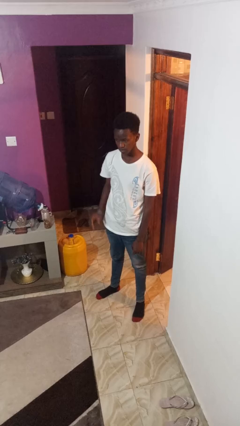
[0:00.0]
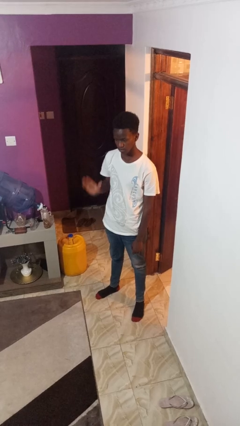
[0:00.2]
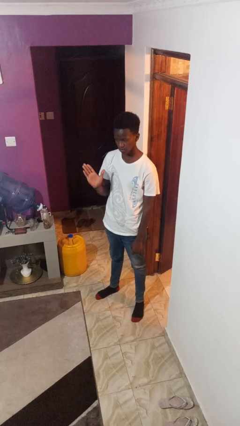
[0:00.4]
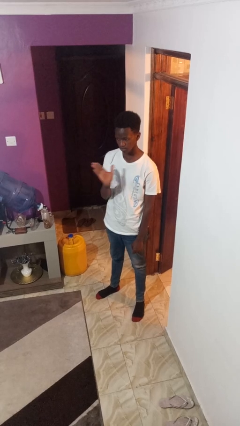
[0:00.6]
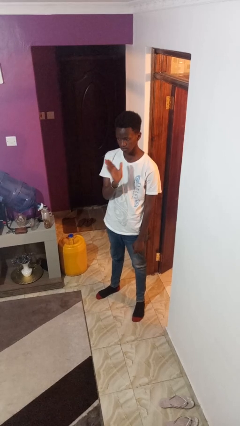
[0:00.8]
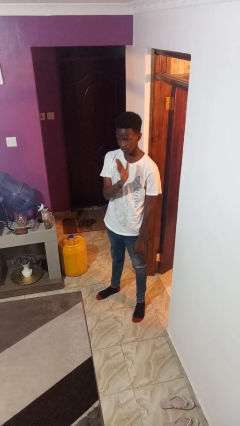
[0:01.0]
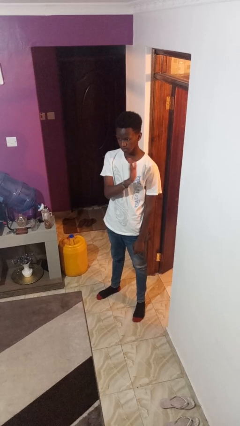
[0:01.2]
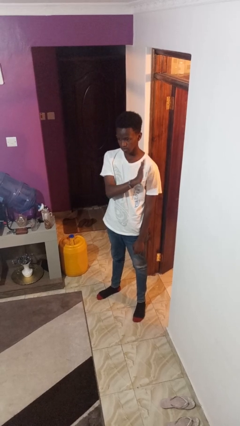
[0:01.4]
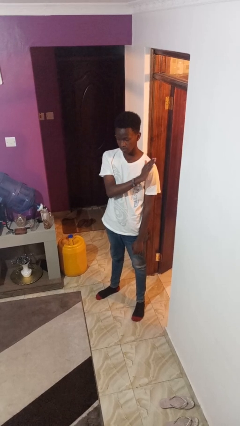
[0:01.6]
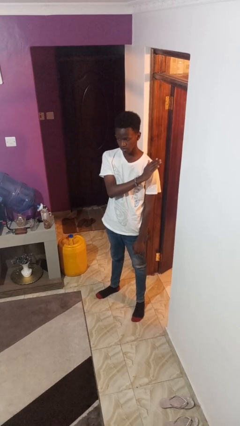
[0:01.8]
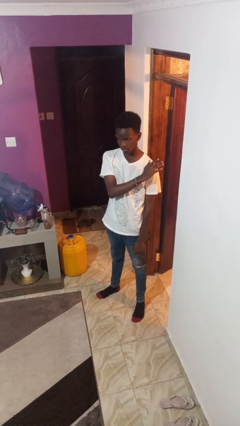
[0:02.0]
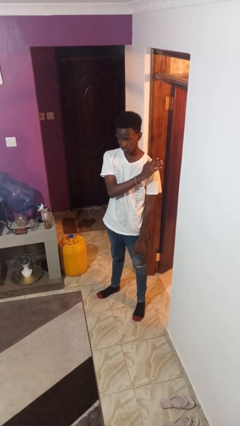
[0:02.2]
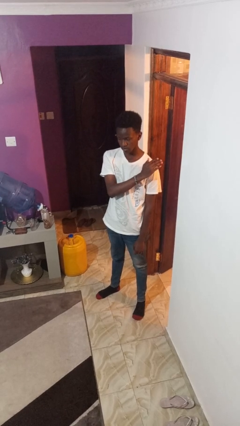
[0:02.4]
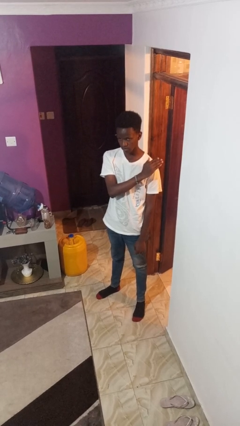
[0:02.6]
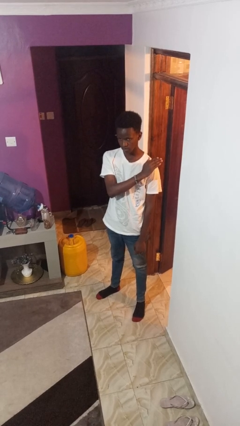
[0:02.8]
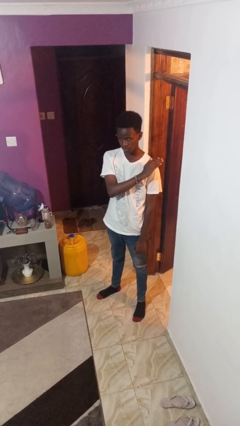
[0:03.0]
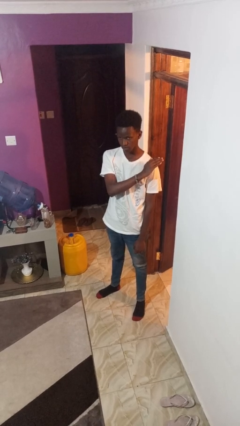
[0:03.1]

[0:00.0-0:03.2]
person gestures swipe left

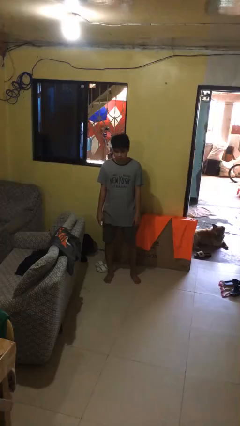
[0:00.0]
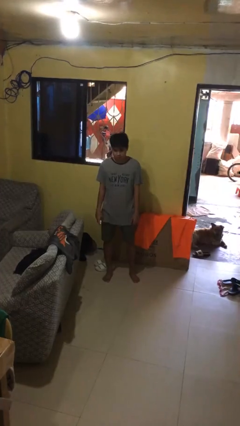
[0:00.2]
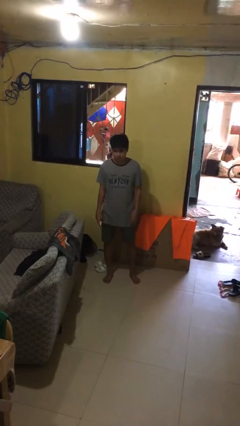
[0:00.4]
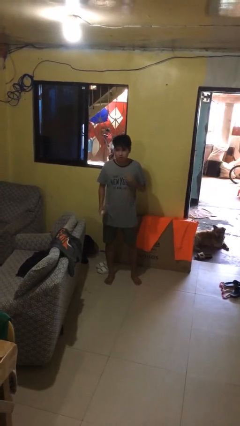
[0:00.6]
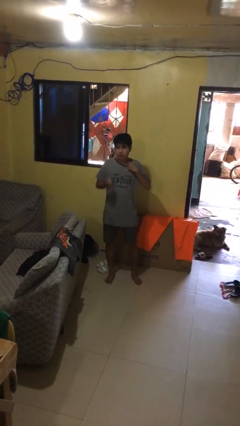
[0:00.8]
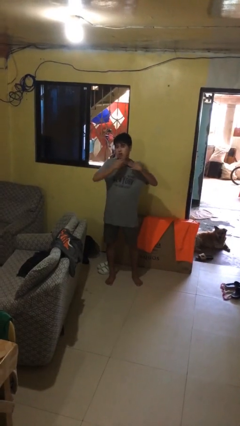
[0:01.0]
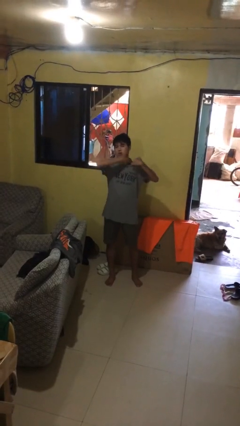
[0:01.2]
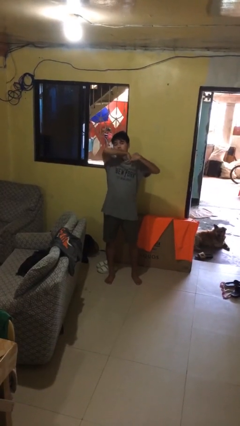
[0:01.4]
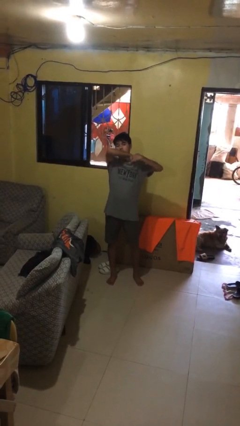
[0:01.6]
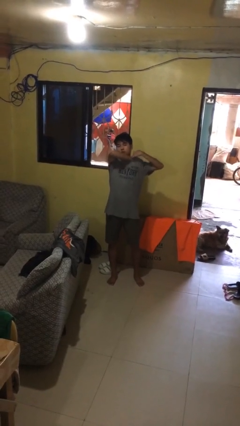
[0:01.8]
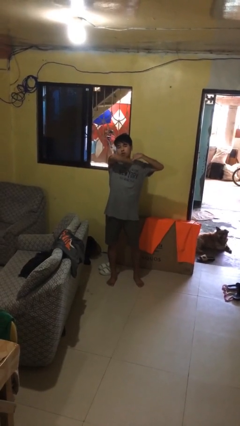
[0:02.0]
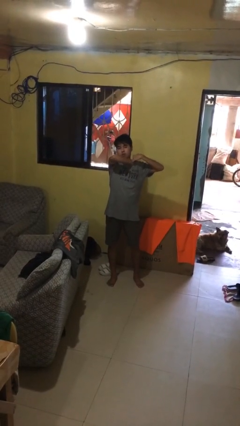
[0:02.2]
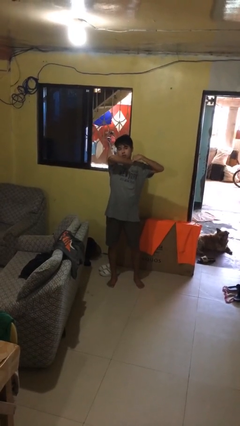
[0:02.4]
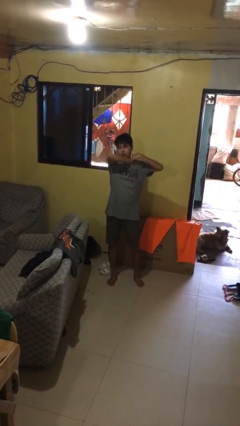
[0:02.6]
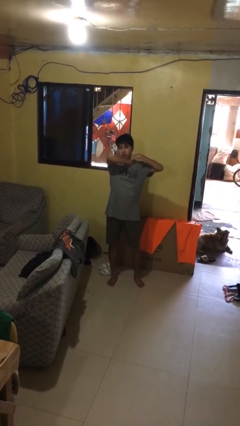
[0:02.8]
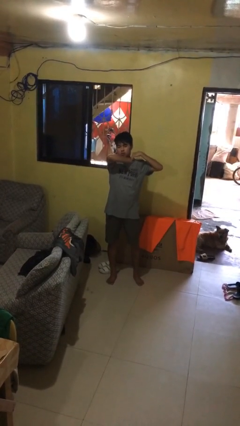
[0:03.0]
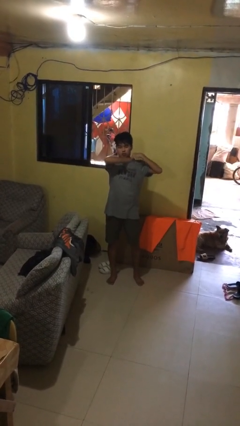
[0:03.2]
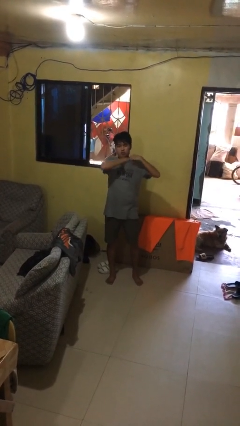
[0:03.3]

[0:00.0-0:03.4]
person applies deodorant

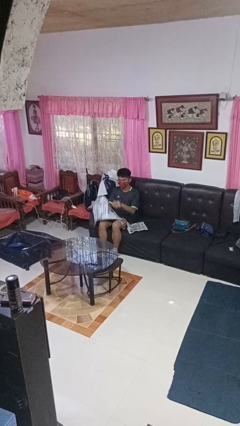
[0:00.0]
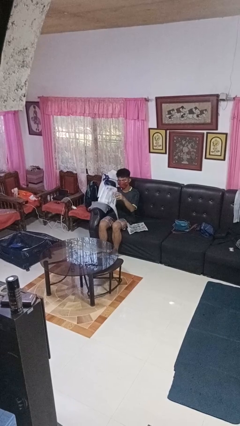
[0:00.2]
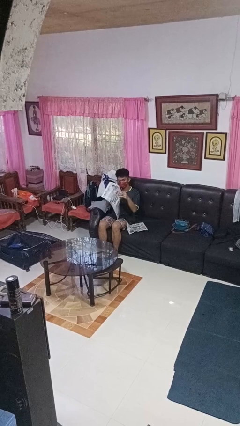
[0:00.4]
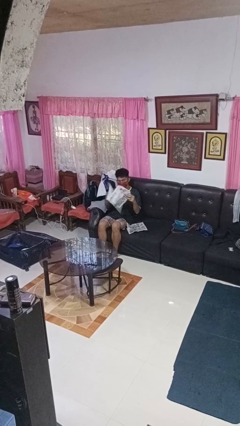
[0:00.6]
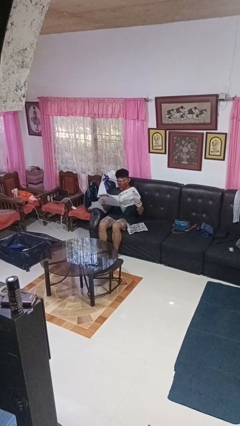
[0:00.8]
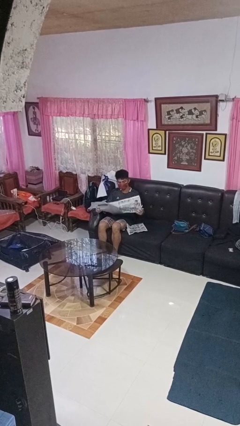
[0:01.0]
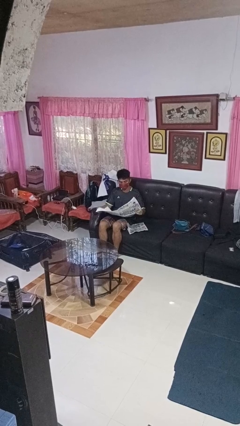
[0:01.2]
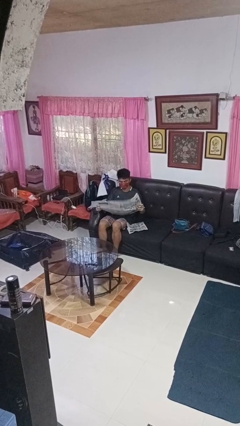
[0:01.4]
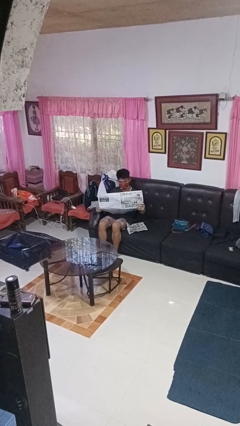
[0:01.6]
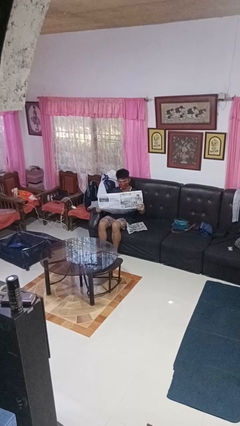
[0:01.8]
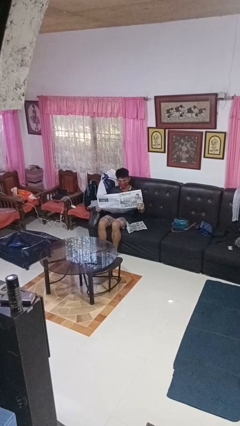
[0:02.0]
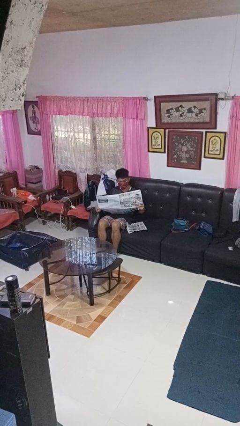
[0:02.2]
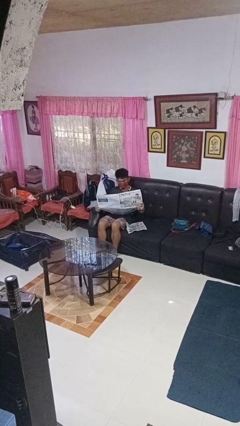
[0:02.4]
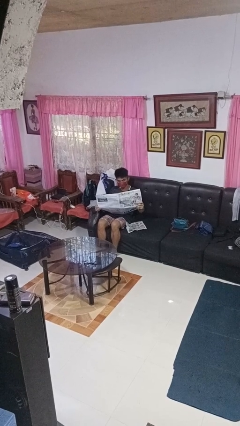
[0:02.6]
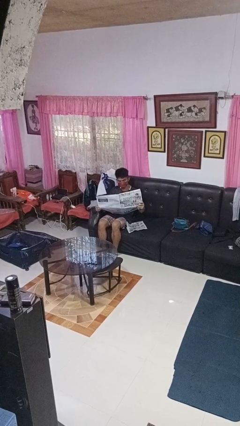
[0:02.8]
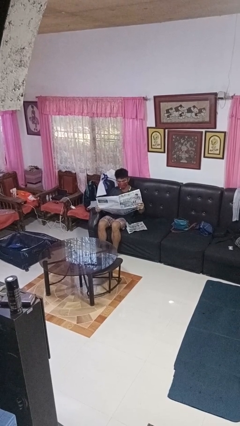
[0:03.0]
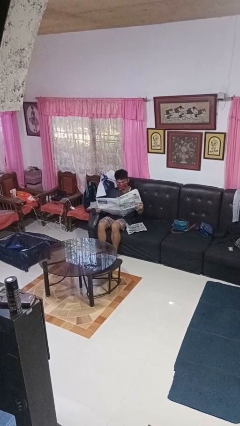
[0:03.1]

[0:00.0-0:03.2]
person reads newspaper

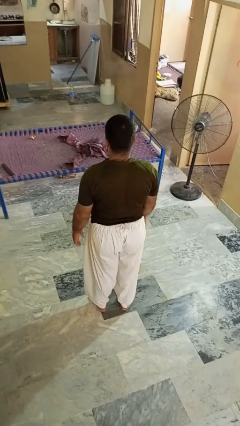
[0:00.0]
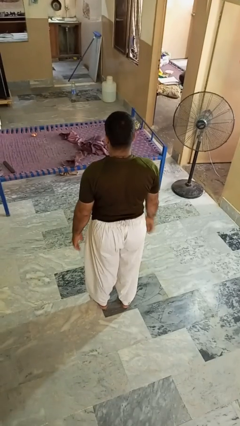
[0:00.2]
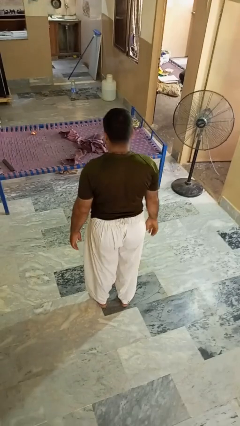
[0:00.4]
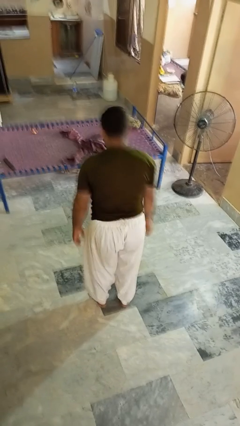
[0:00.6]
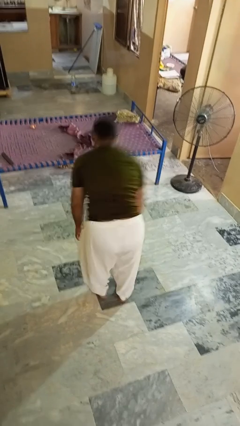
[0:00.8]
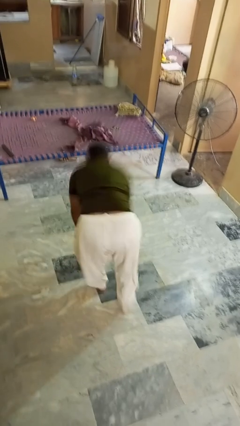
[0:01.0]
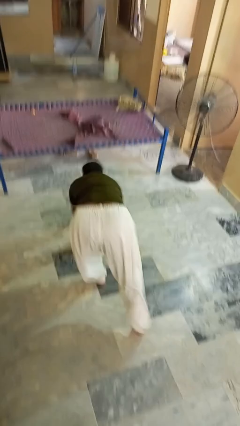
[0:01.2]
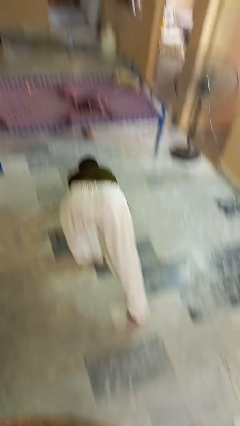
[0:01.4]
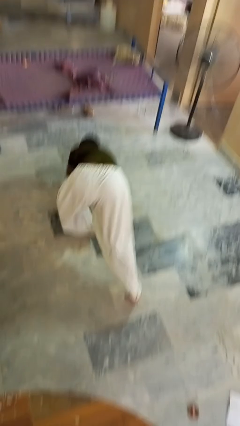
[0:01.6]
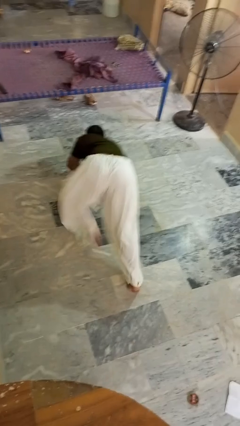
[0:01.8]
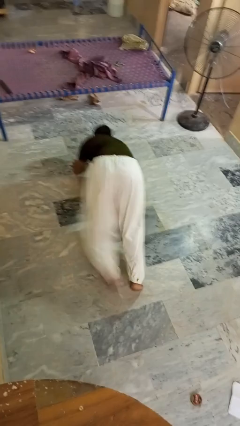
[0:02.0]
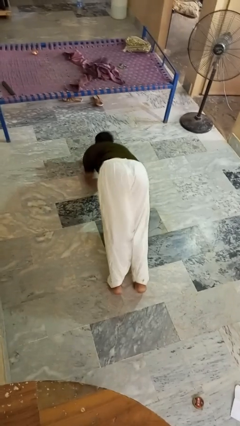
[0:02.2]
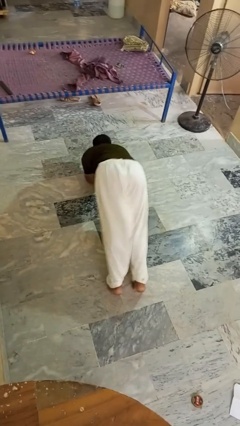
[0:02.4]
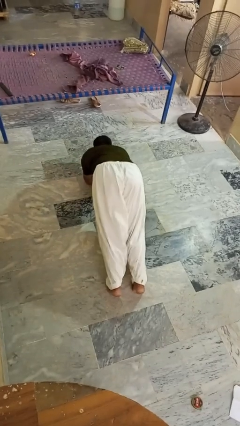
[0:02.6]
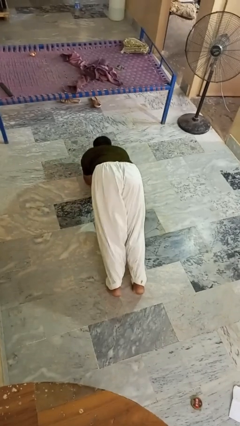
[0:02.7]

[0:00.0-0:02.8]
person exercises with plank

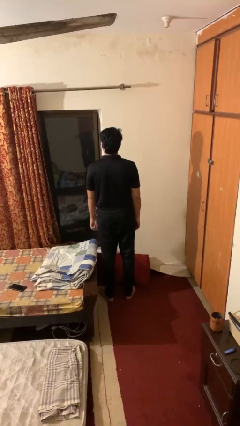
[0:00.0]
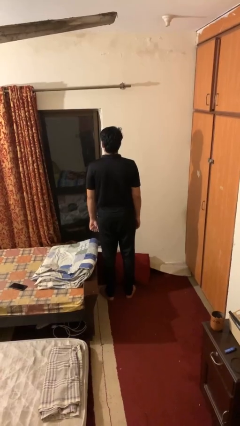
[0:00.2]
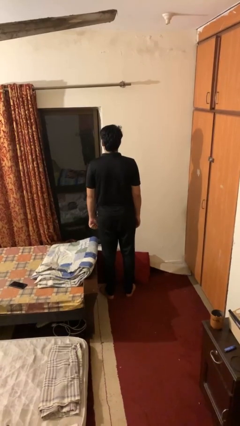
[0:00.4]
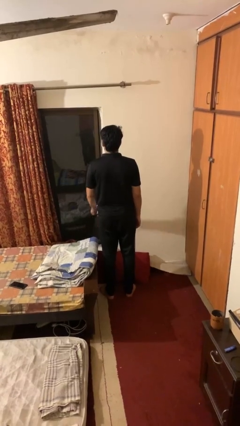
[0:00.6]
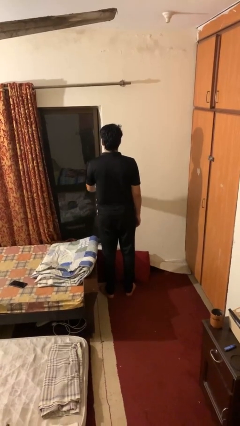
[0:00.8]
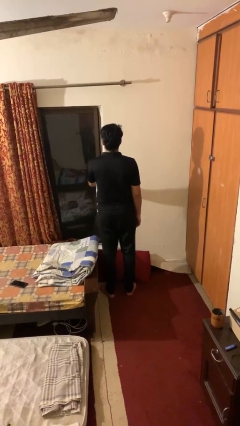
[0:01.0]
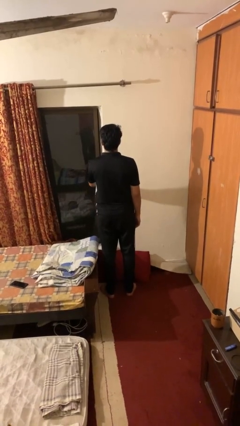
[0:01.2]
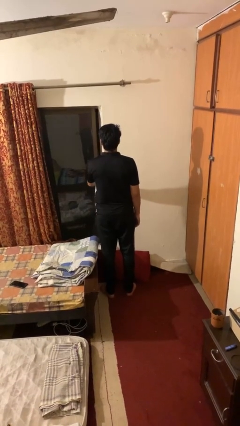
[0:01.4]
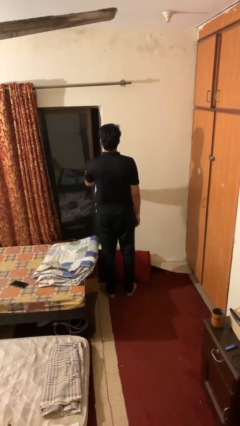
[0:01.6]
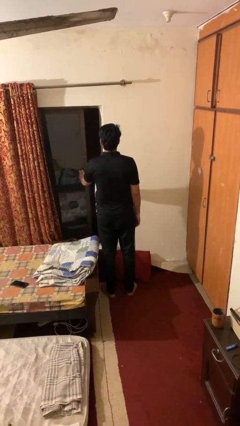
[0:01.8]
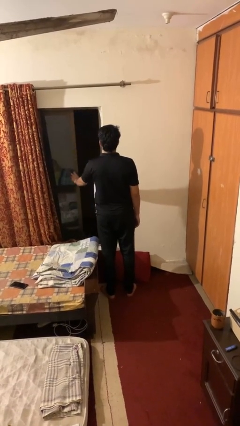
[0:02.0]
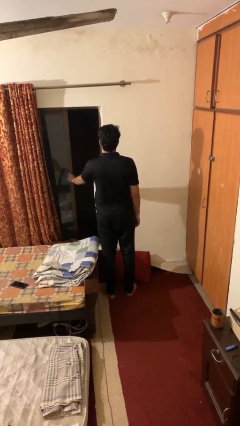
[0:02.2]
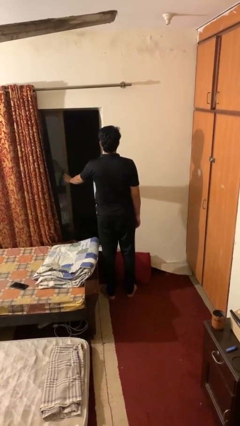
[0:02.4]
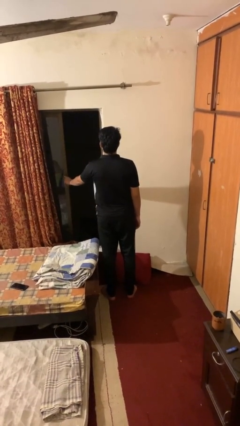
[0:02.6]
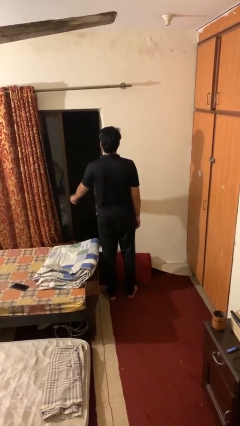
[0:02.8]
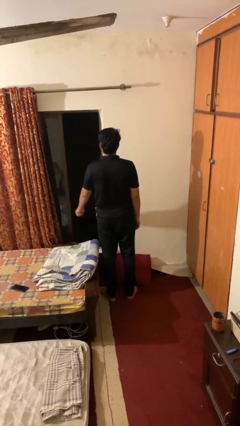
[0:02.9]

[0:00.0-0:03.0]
person opens home window

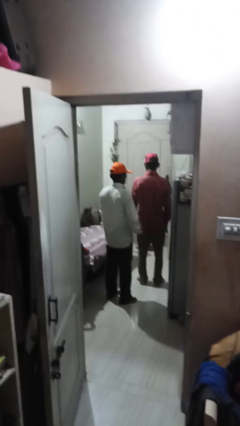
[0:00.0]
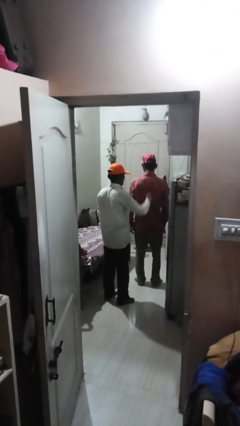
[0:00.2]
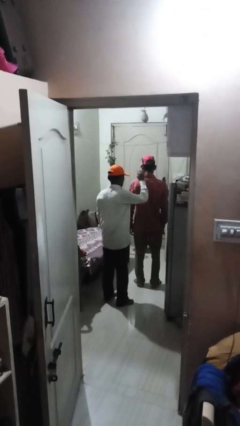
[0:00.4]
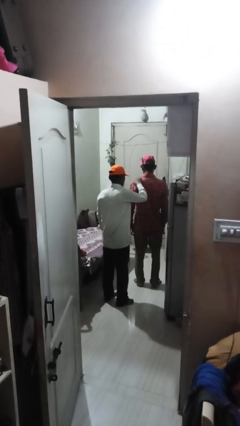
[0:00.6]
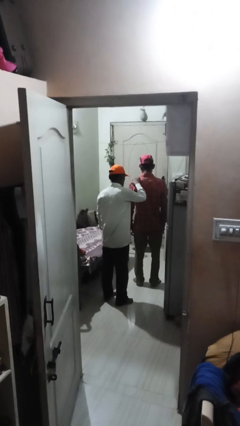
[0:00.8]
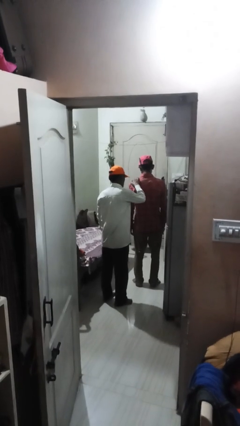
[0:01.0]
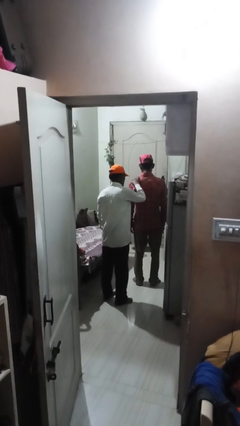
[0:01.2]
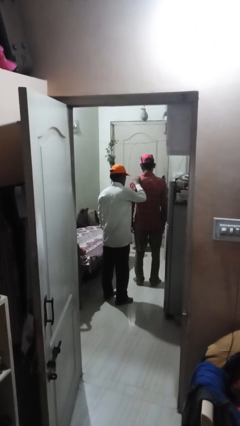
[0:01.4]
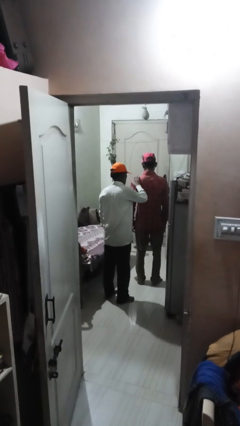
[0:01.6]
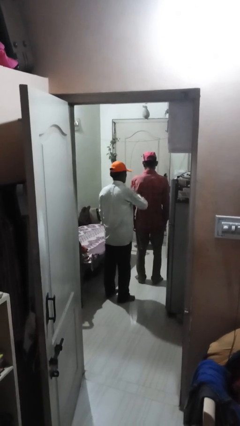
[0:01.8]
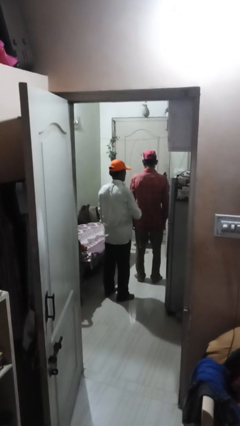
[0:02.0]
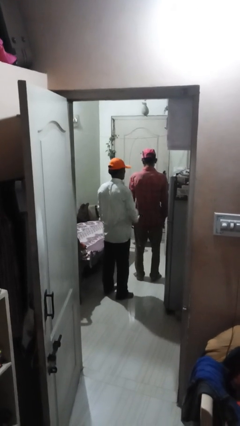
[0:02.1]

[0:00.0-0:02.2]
person touches back of person
